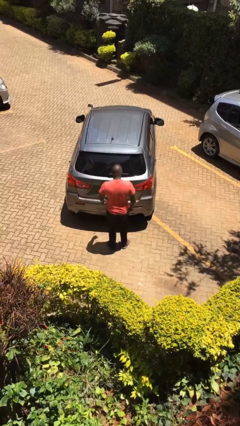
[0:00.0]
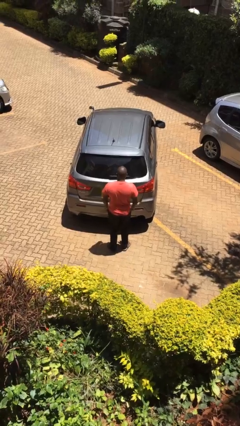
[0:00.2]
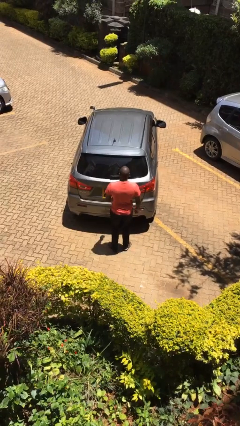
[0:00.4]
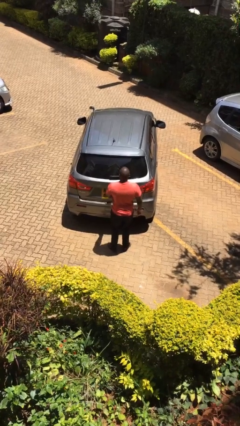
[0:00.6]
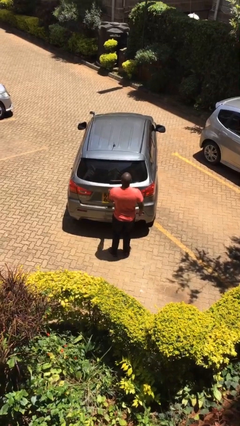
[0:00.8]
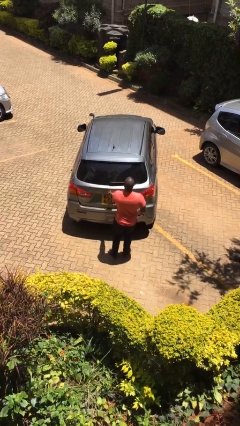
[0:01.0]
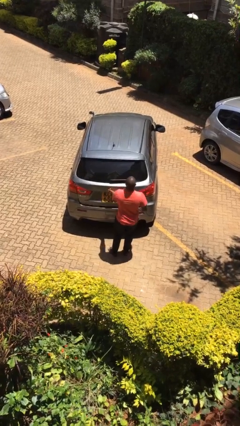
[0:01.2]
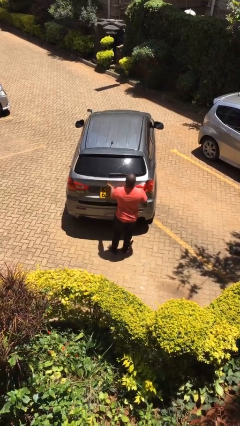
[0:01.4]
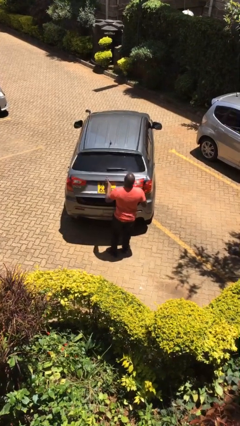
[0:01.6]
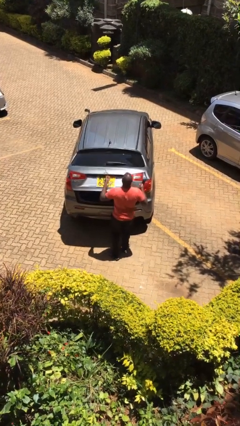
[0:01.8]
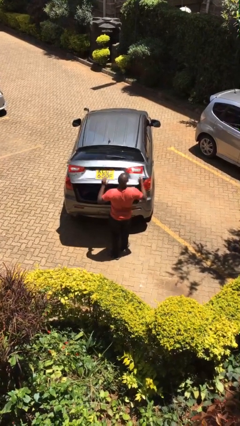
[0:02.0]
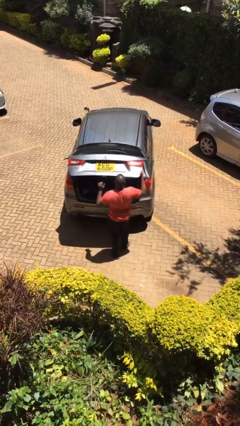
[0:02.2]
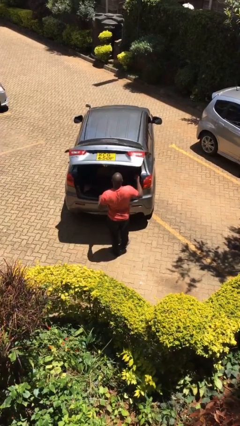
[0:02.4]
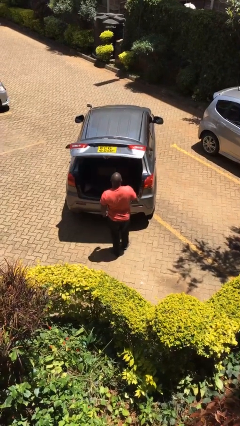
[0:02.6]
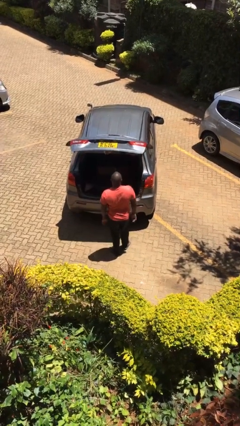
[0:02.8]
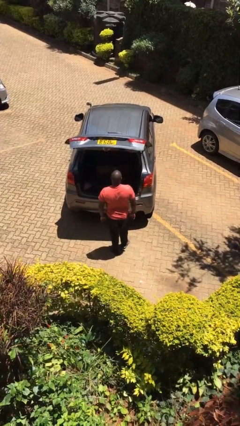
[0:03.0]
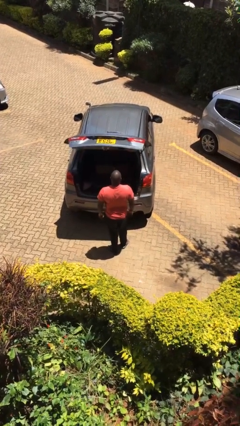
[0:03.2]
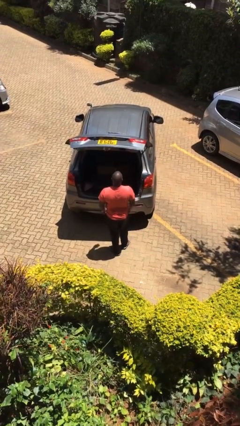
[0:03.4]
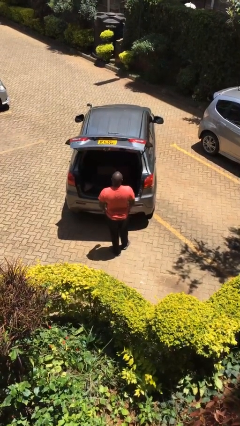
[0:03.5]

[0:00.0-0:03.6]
person opens car trunk

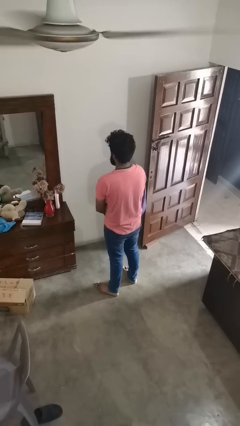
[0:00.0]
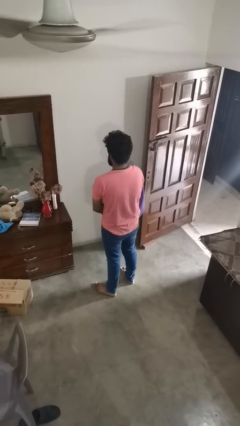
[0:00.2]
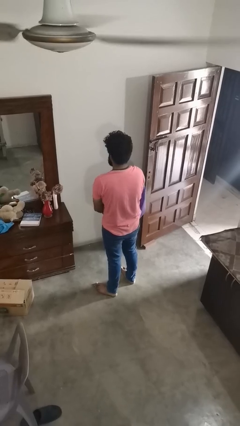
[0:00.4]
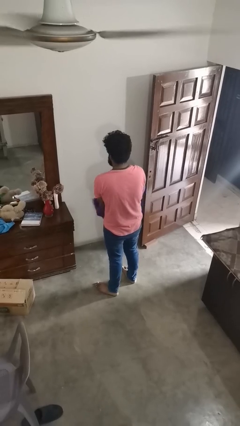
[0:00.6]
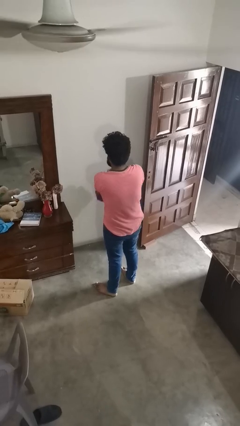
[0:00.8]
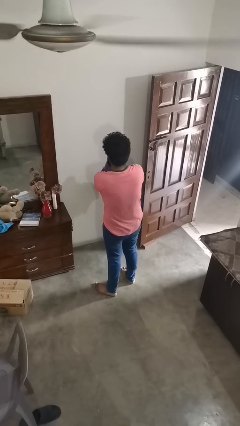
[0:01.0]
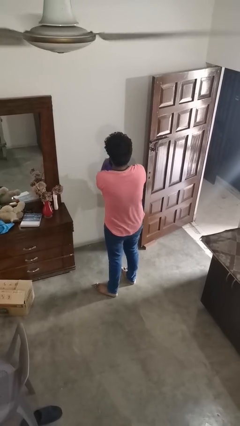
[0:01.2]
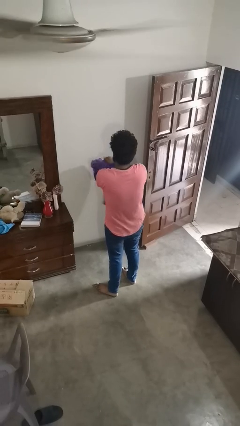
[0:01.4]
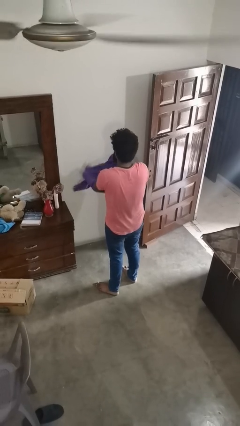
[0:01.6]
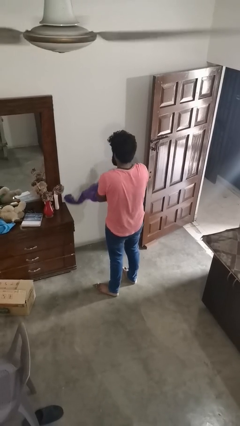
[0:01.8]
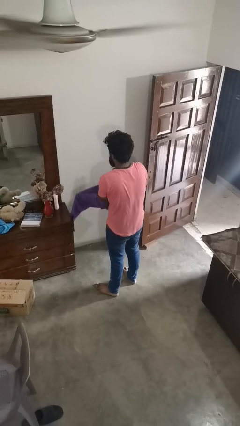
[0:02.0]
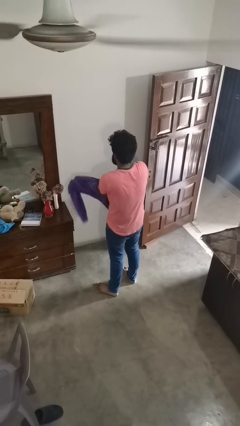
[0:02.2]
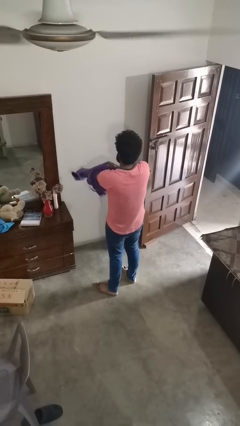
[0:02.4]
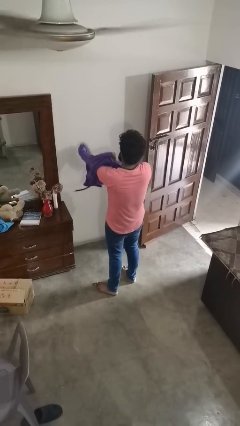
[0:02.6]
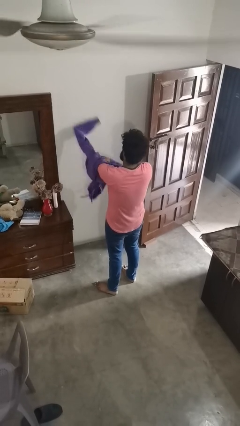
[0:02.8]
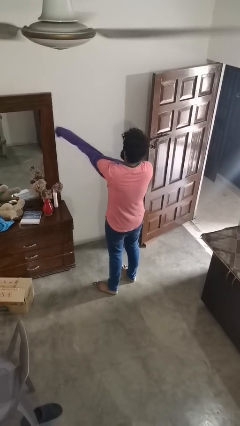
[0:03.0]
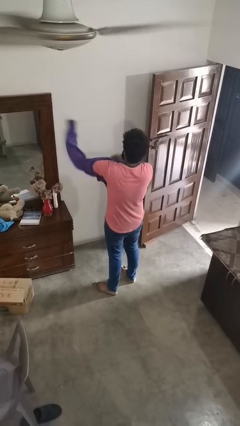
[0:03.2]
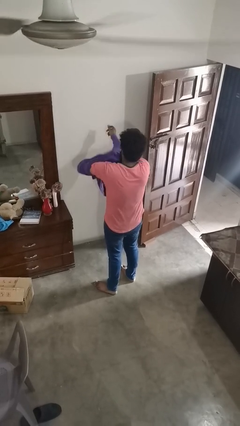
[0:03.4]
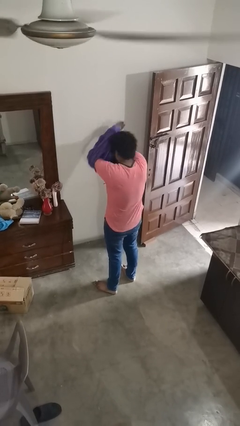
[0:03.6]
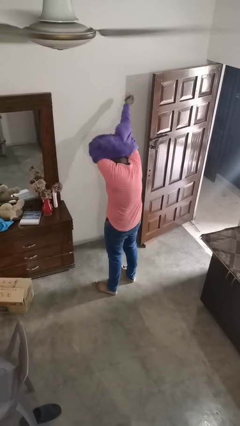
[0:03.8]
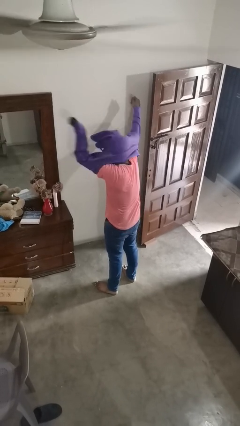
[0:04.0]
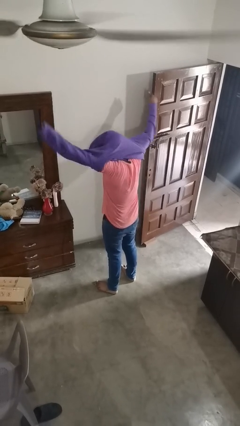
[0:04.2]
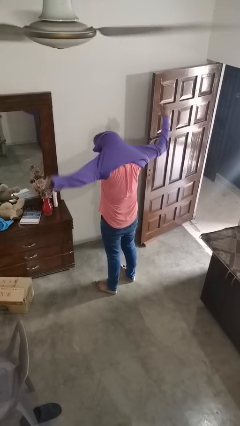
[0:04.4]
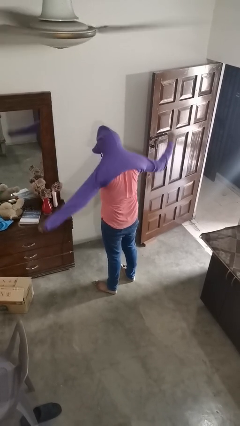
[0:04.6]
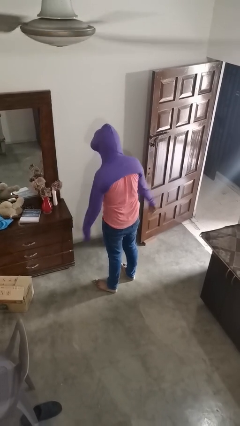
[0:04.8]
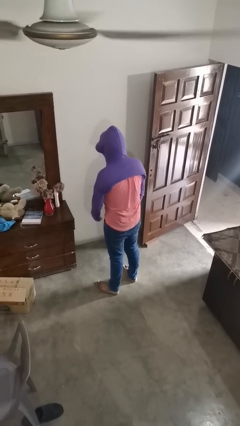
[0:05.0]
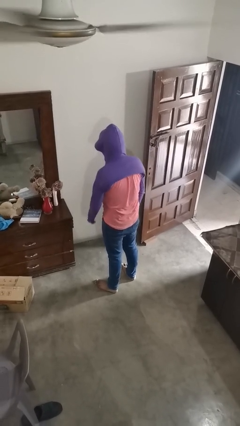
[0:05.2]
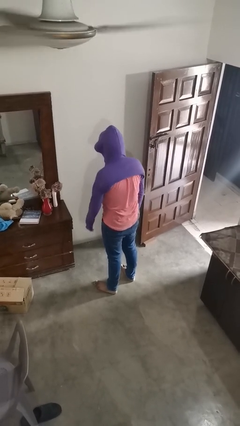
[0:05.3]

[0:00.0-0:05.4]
person puts on hoodie

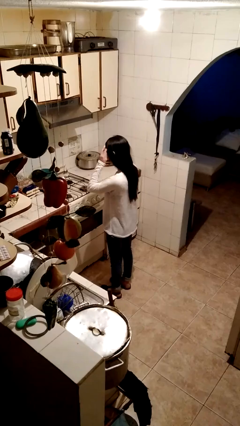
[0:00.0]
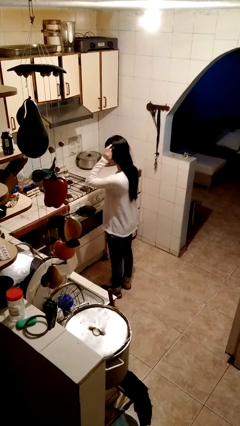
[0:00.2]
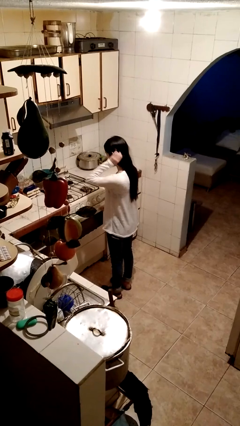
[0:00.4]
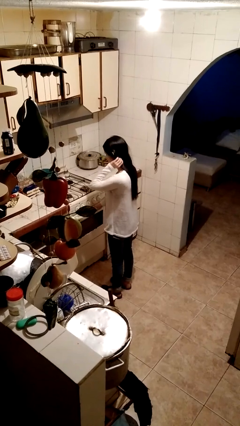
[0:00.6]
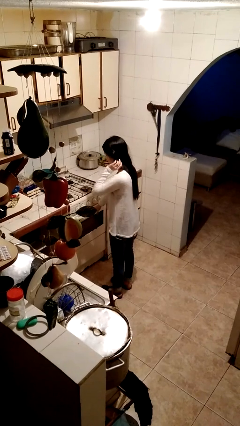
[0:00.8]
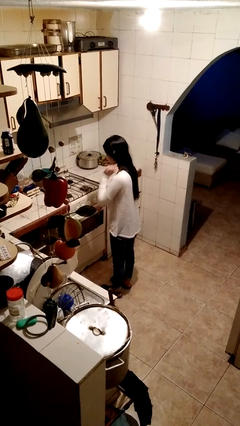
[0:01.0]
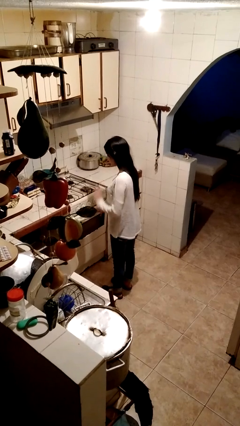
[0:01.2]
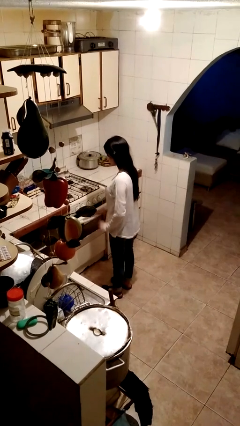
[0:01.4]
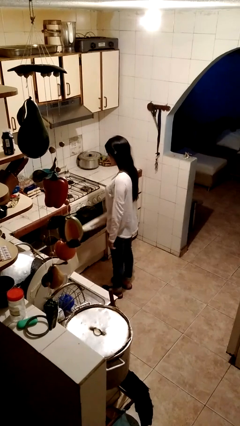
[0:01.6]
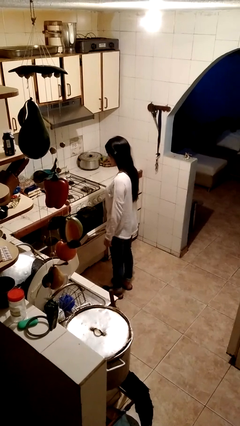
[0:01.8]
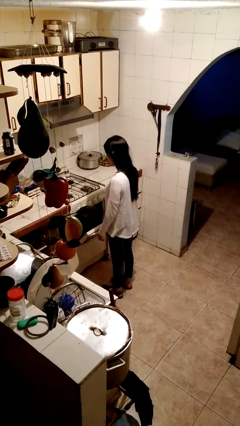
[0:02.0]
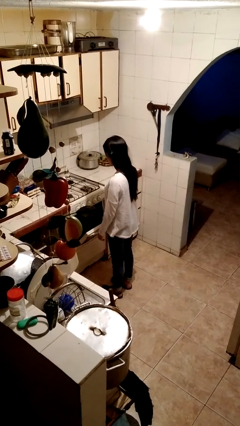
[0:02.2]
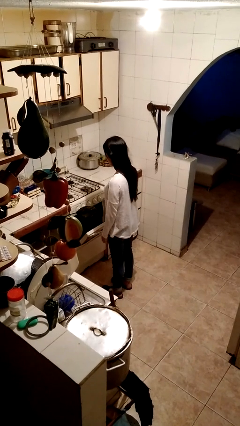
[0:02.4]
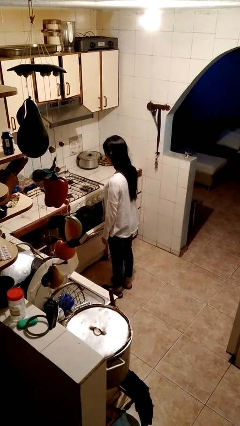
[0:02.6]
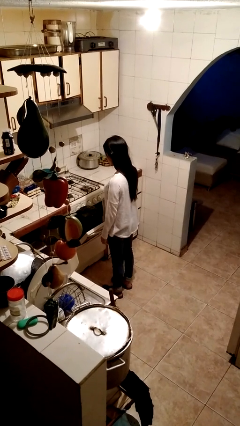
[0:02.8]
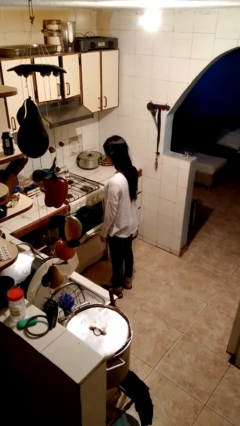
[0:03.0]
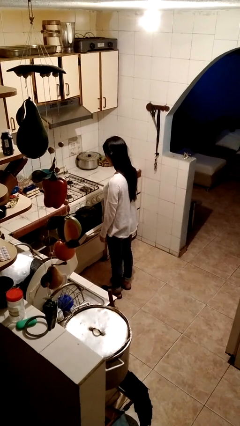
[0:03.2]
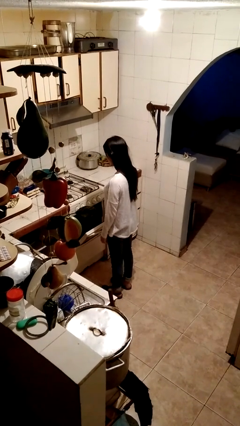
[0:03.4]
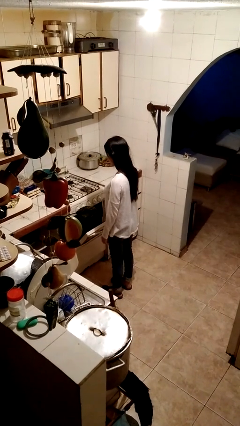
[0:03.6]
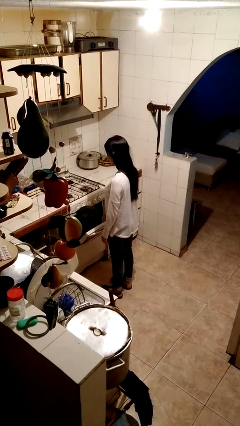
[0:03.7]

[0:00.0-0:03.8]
person opens oven door

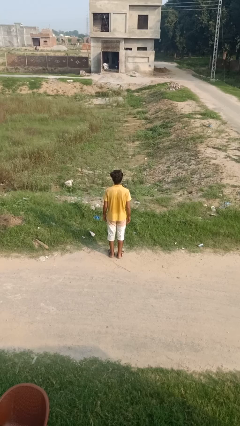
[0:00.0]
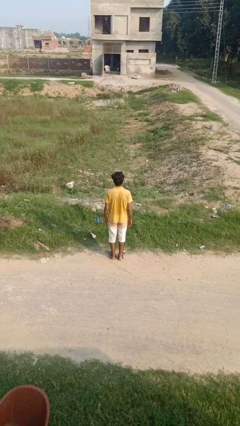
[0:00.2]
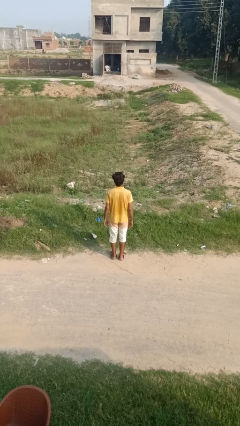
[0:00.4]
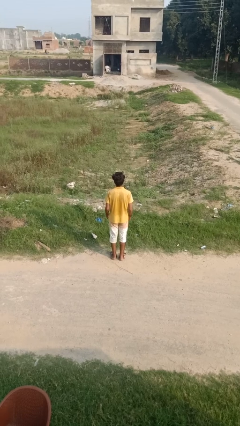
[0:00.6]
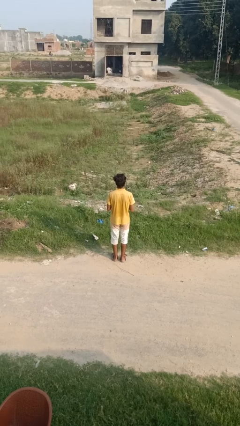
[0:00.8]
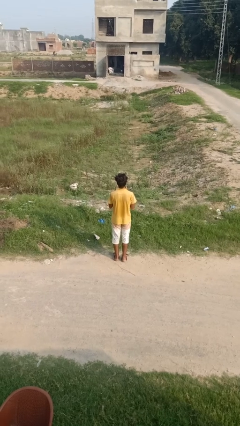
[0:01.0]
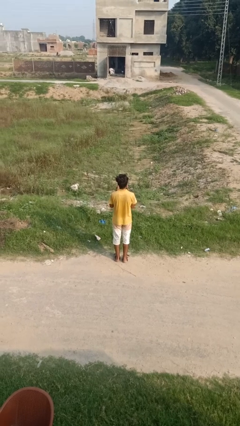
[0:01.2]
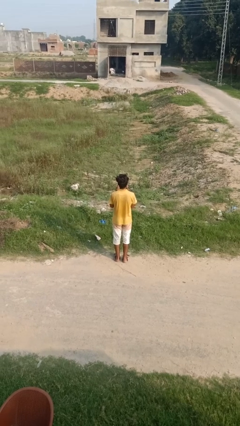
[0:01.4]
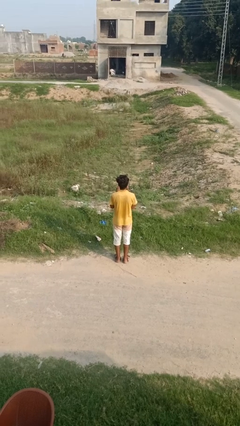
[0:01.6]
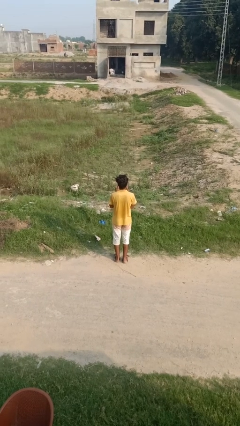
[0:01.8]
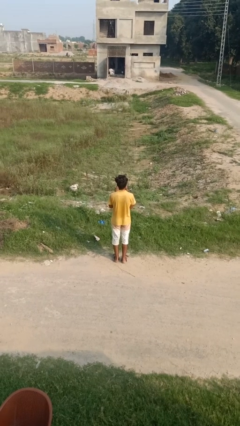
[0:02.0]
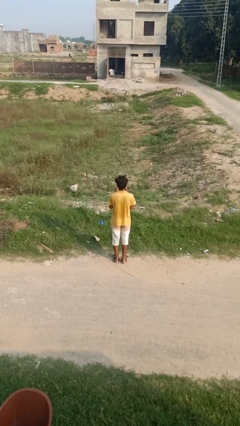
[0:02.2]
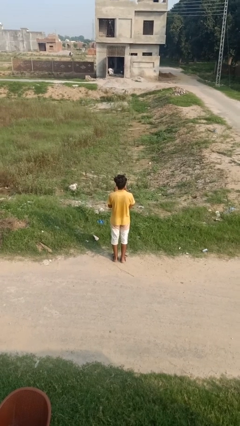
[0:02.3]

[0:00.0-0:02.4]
person prays

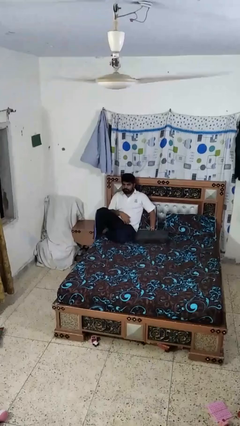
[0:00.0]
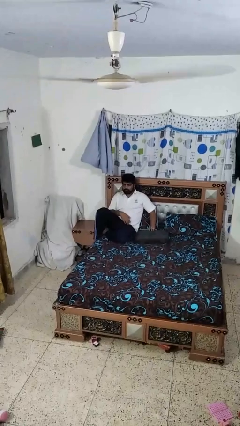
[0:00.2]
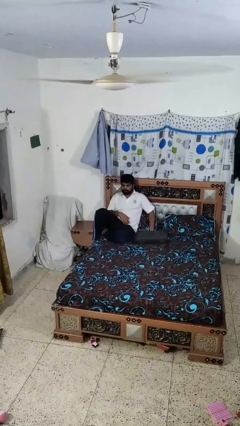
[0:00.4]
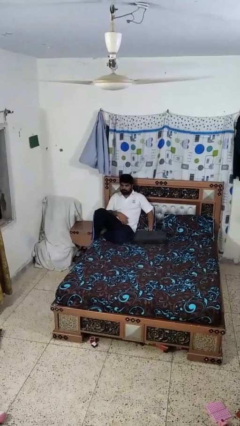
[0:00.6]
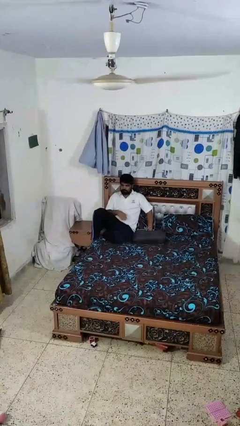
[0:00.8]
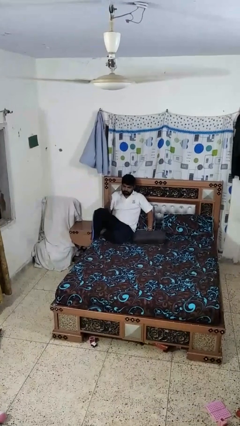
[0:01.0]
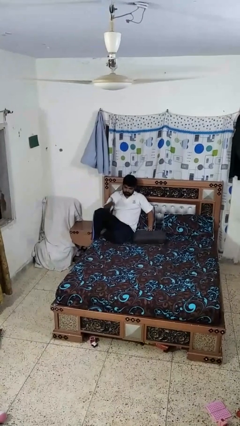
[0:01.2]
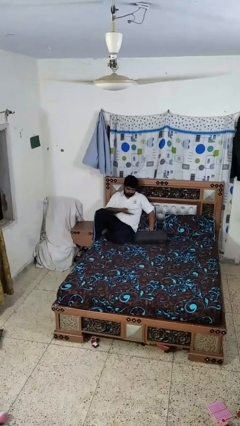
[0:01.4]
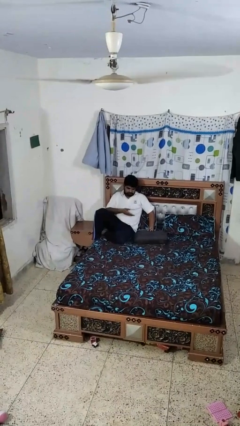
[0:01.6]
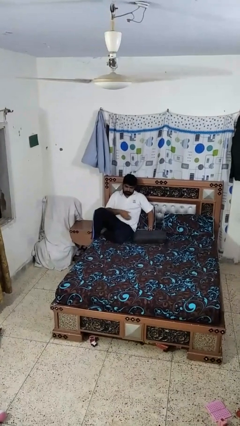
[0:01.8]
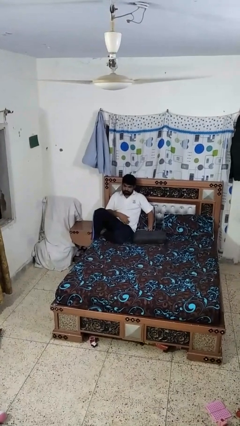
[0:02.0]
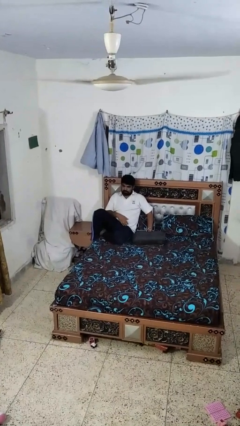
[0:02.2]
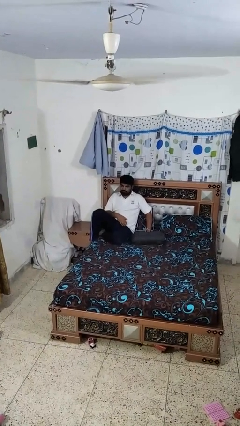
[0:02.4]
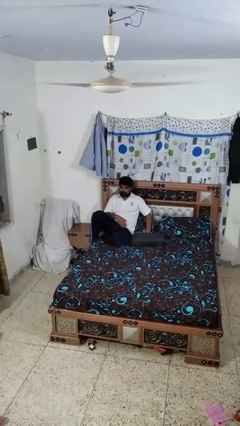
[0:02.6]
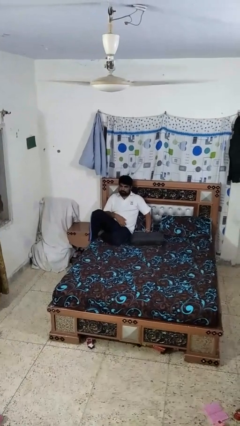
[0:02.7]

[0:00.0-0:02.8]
person gestures come here
